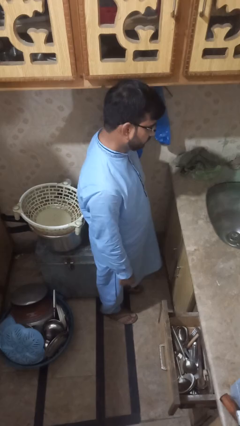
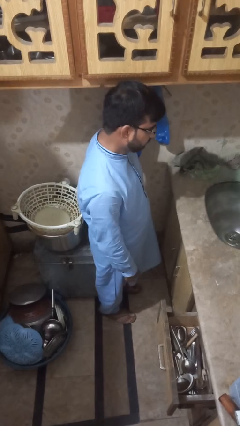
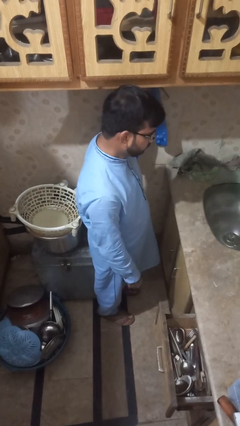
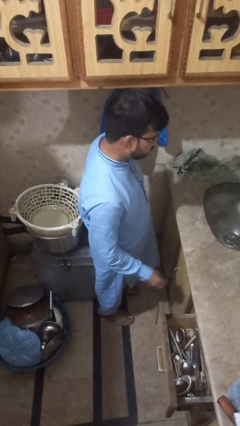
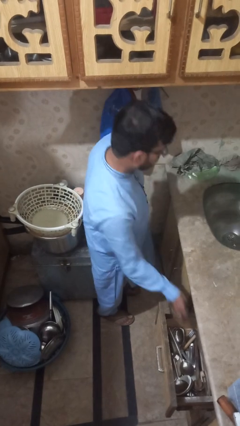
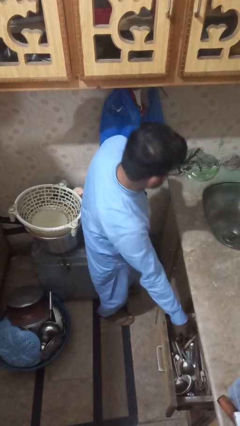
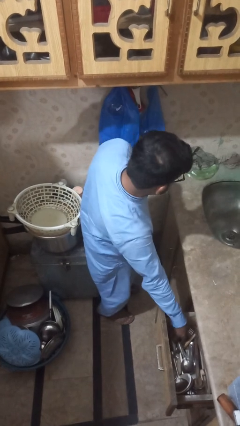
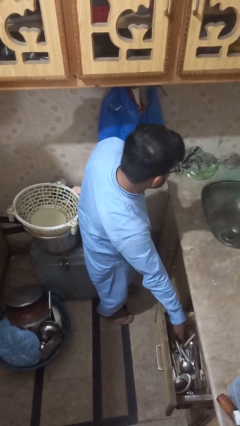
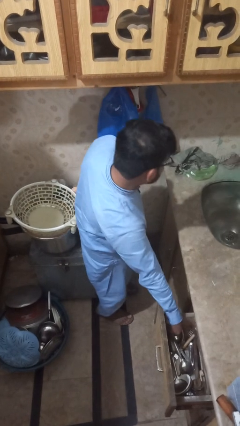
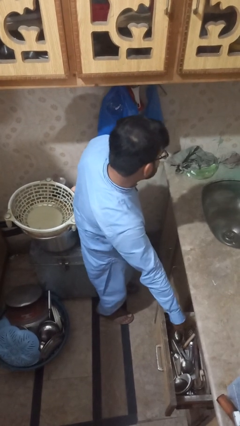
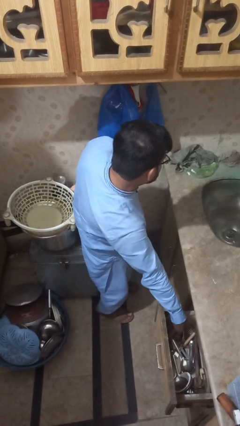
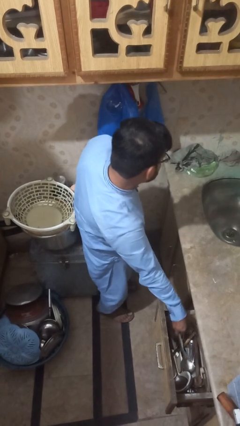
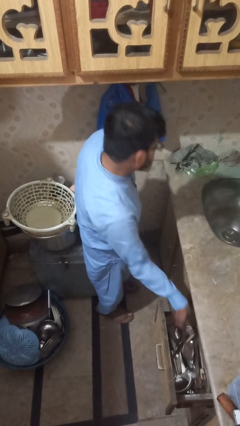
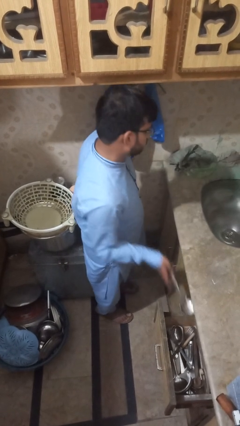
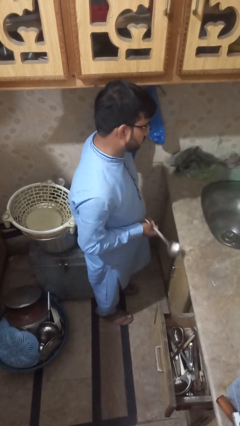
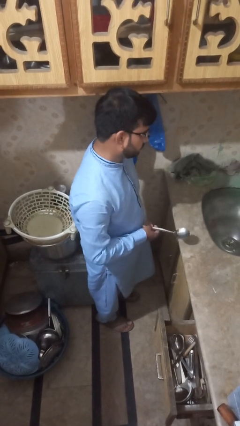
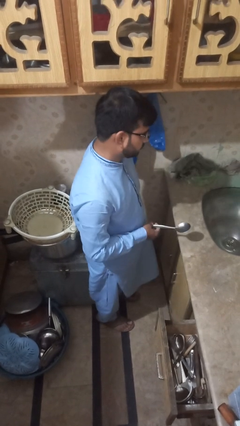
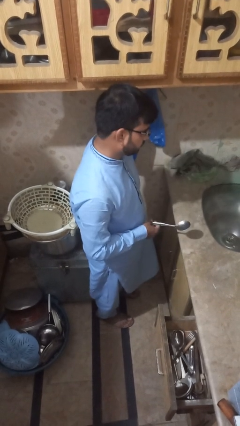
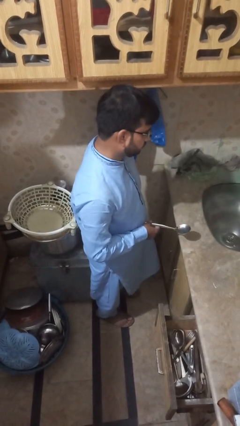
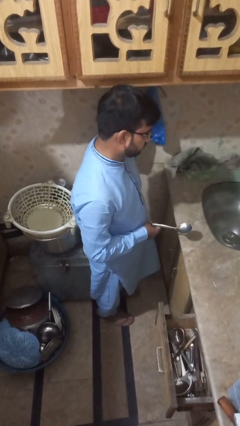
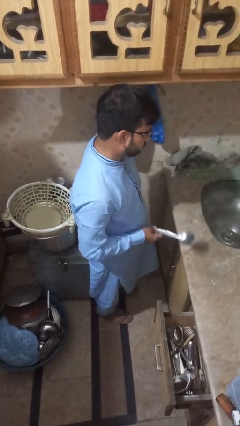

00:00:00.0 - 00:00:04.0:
person takes object from kitchen drawer

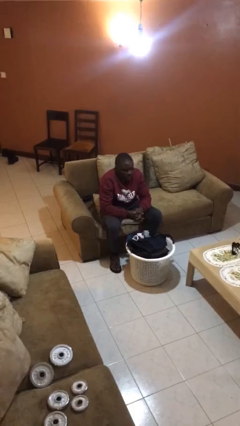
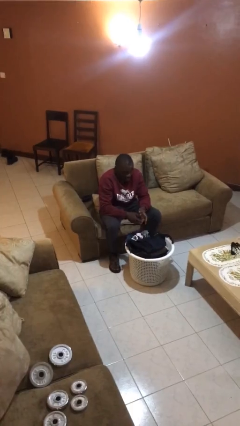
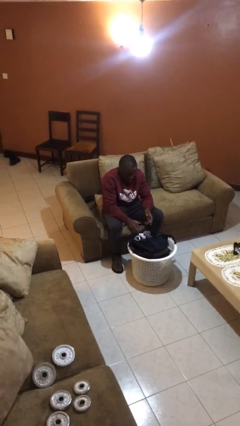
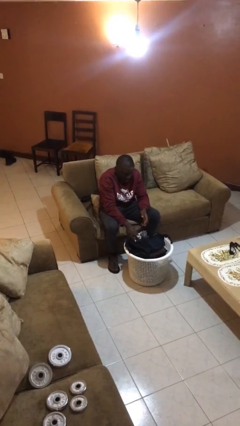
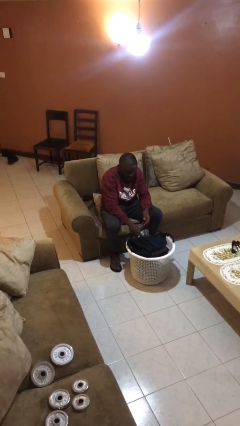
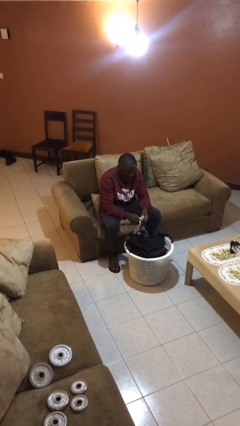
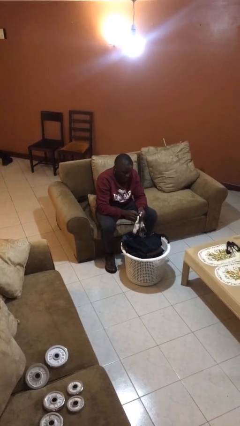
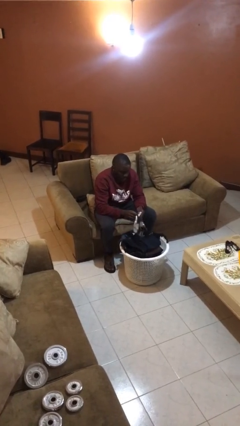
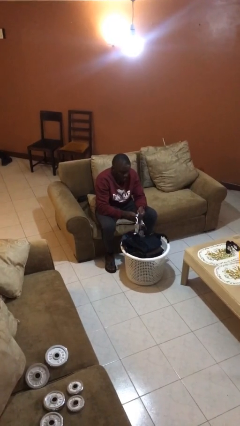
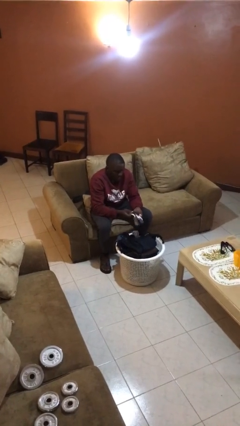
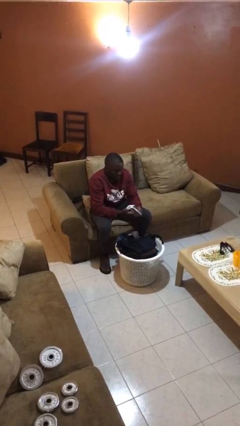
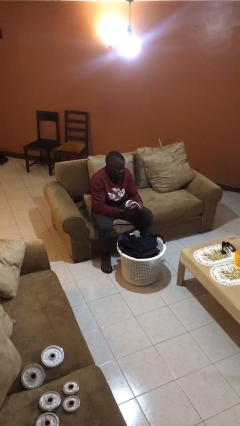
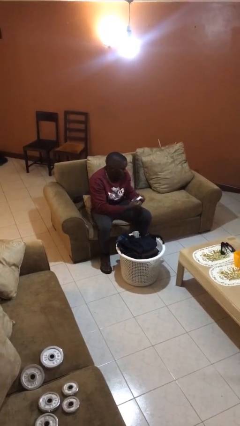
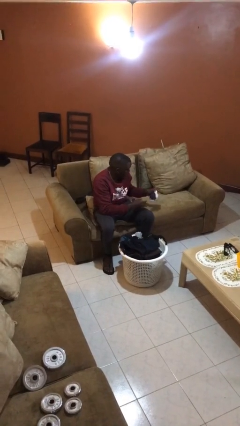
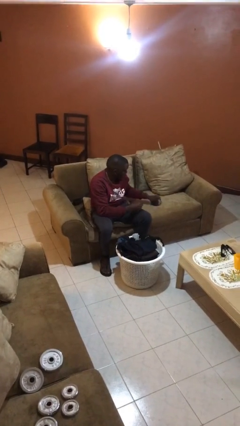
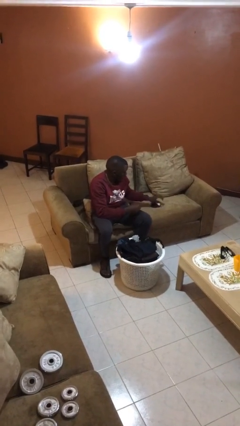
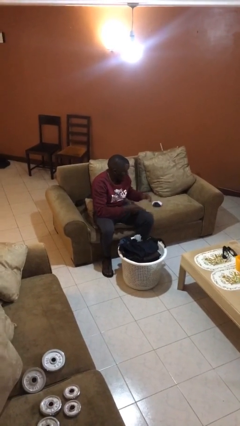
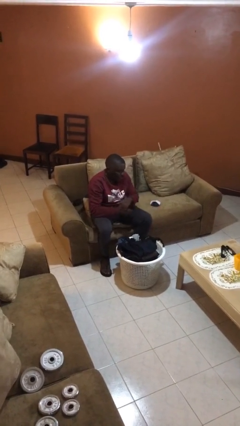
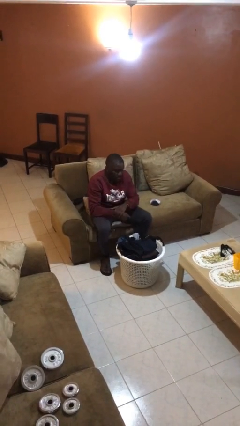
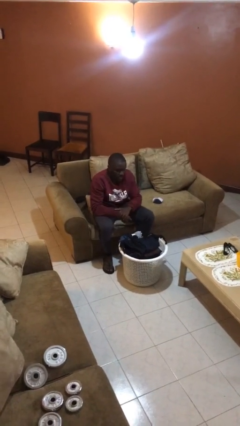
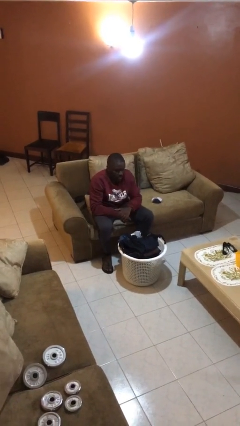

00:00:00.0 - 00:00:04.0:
person folds socks

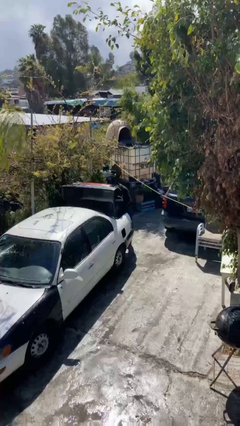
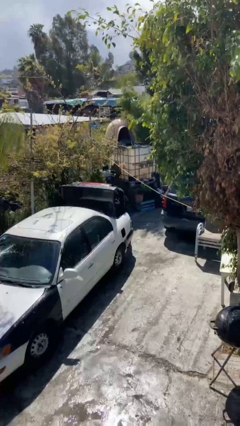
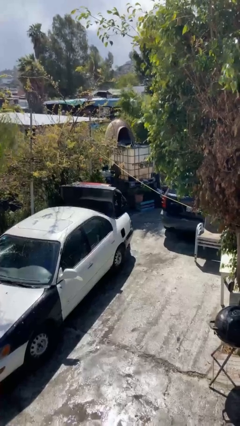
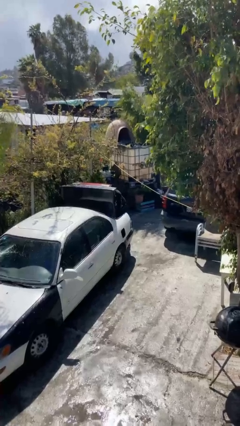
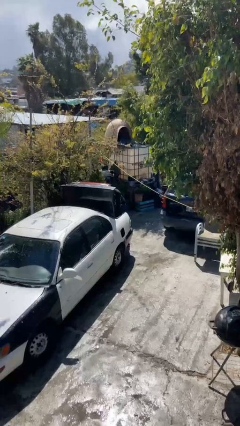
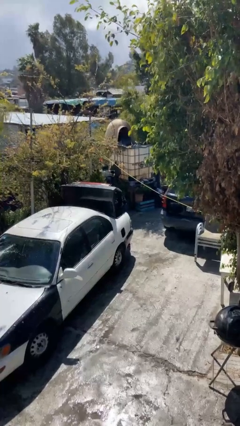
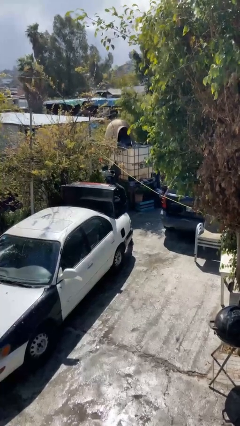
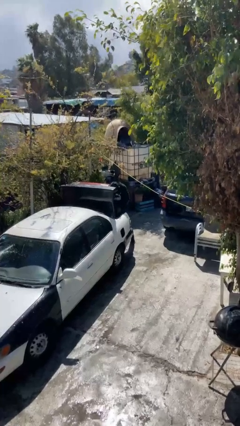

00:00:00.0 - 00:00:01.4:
person loads car

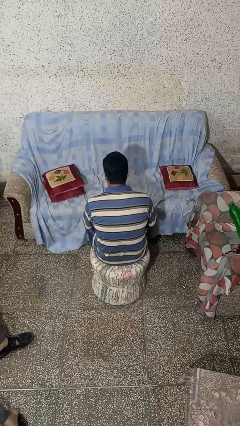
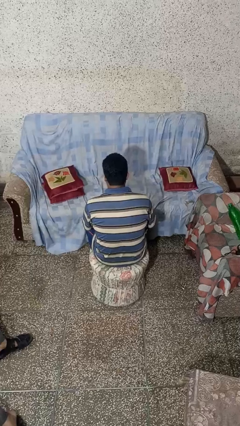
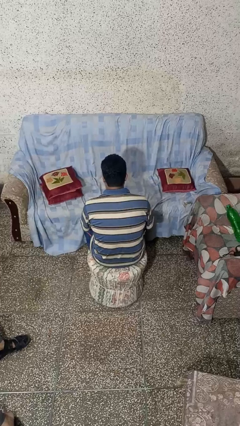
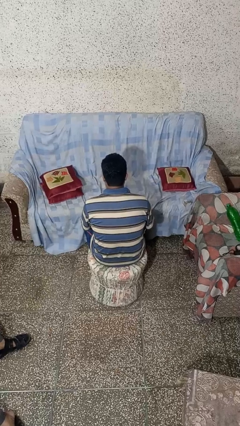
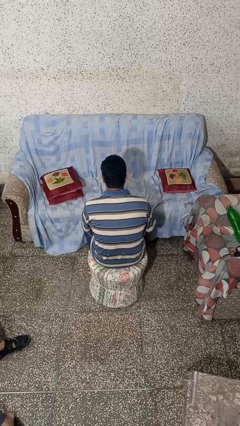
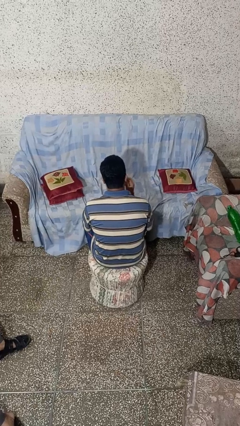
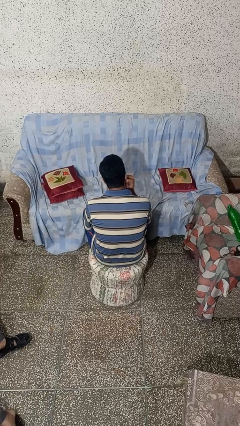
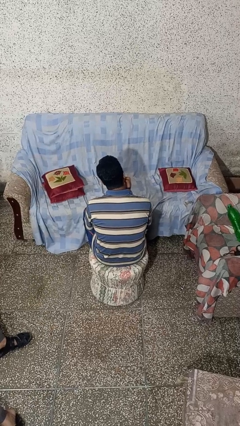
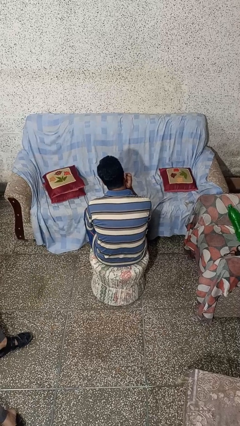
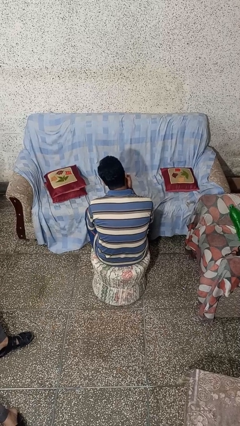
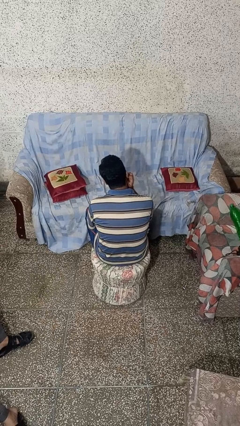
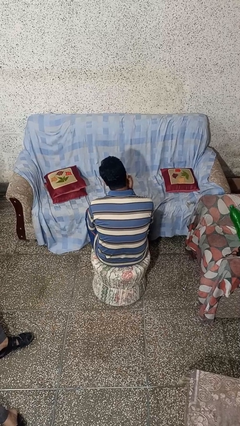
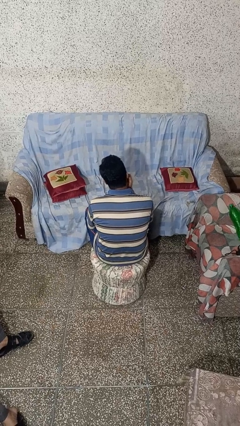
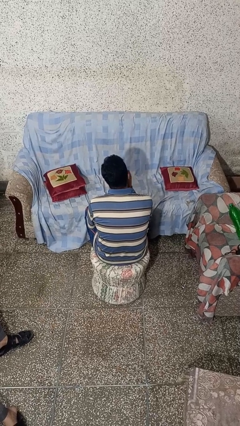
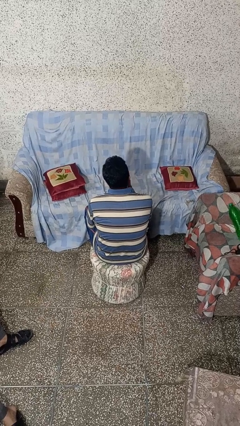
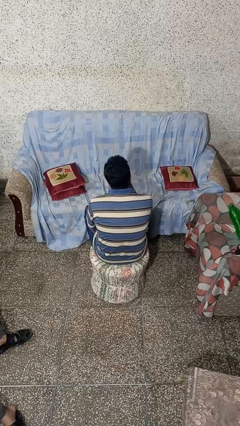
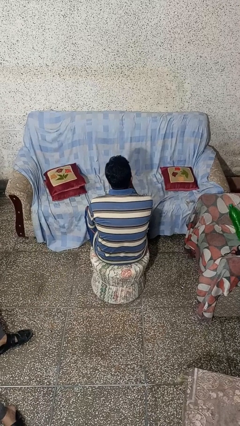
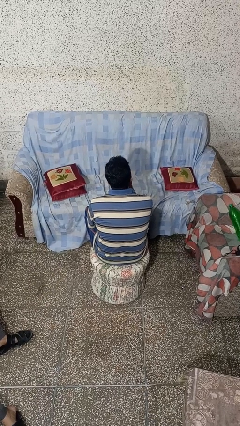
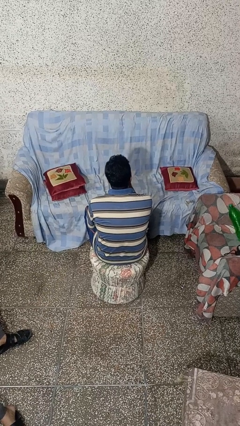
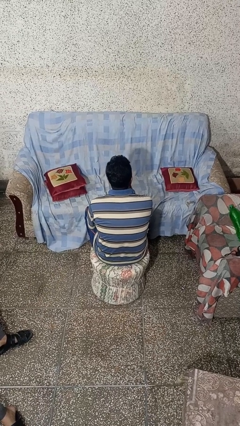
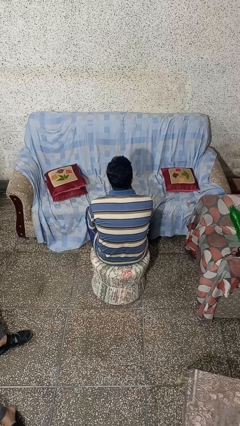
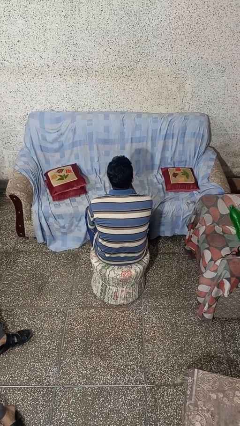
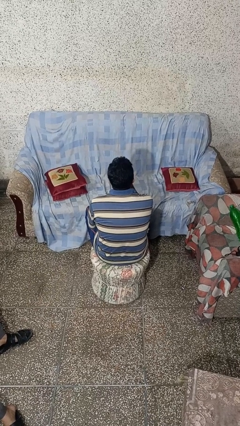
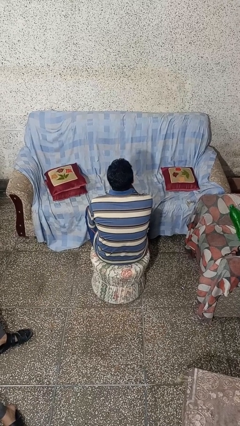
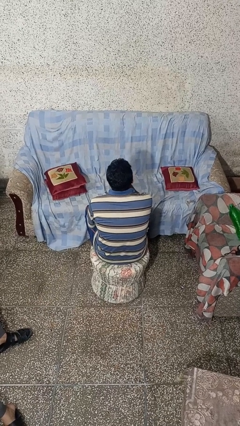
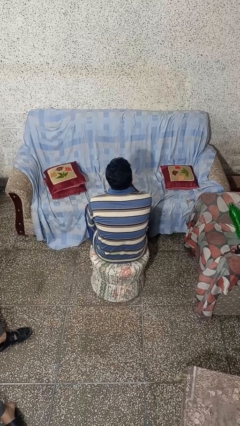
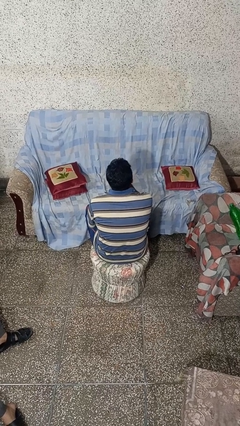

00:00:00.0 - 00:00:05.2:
person strokes chin

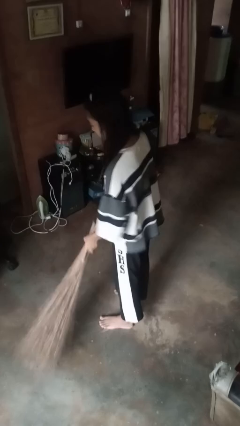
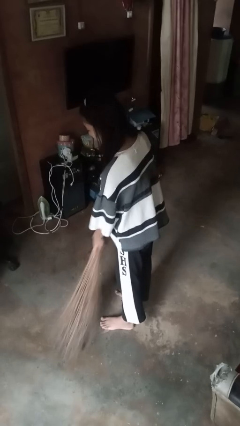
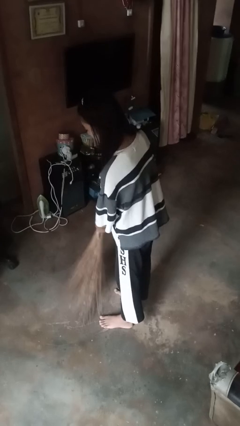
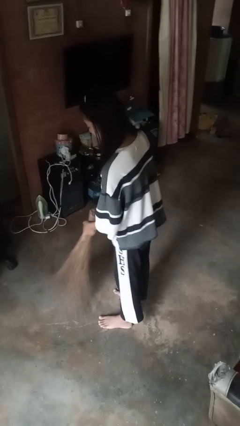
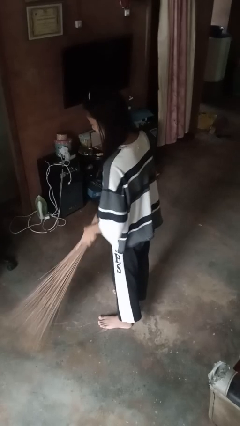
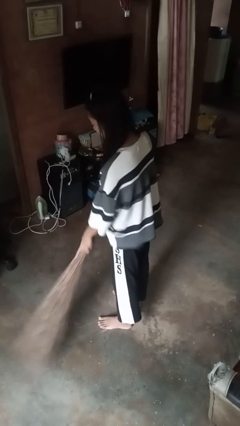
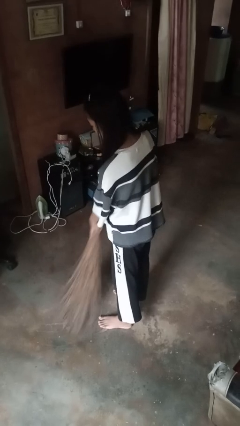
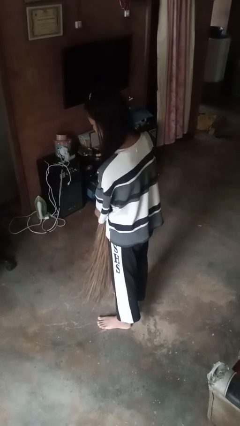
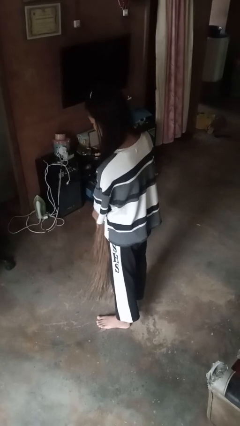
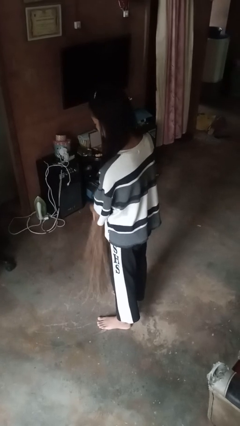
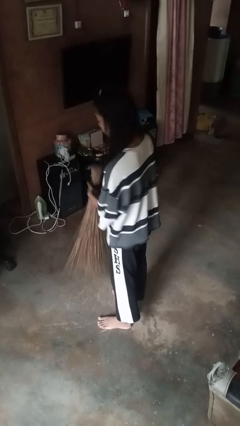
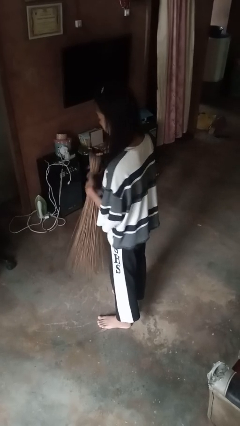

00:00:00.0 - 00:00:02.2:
person sweeps floor

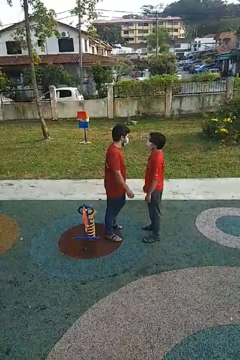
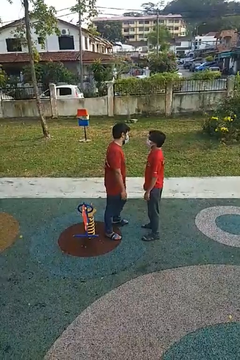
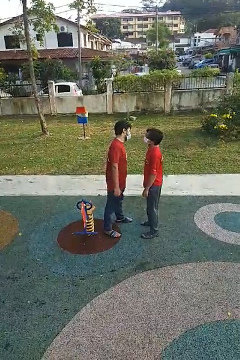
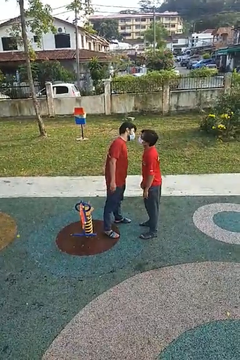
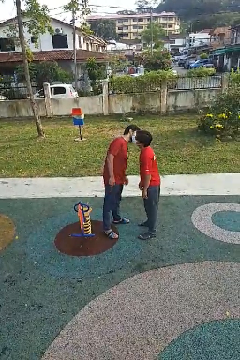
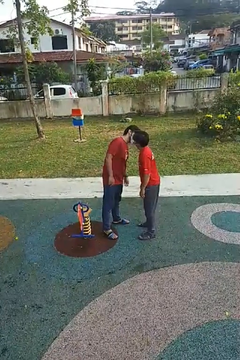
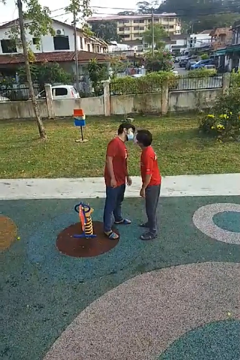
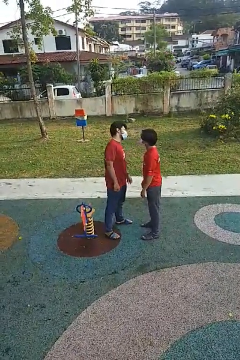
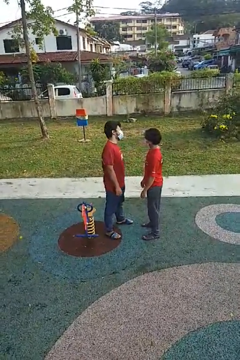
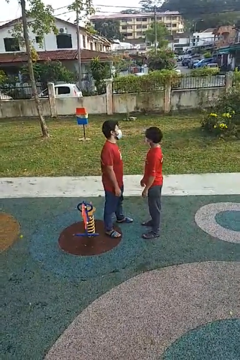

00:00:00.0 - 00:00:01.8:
person kisses cheek of person
